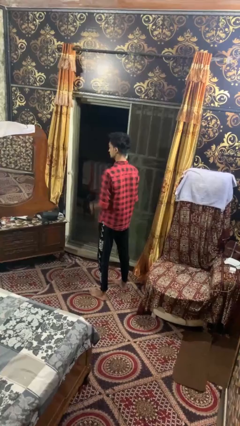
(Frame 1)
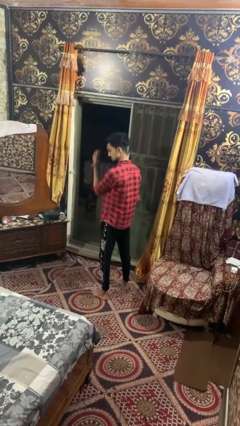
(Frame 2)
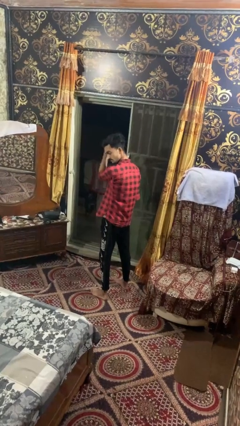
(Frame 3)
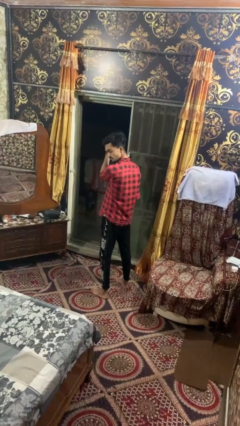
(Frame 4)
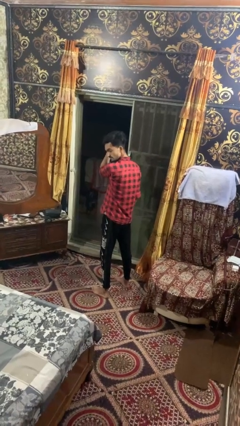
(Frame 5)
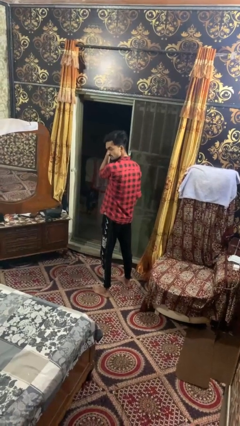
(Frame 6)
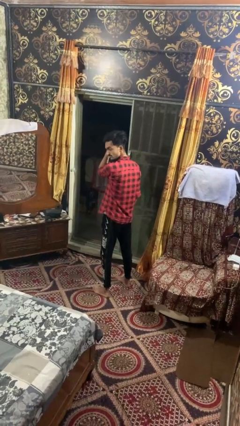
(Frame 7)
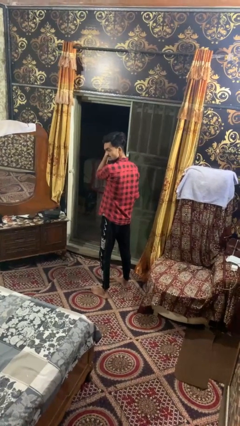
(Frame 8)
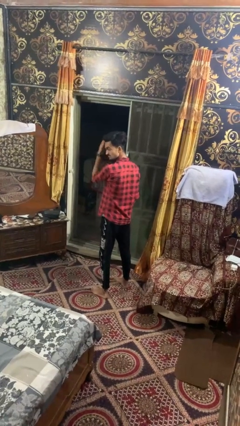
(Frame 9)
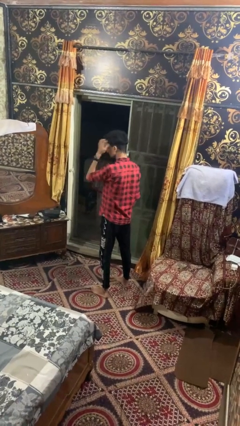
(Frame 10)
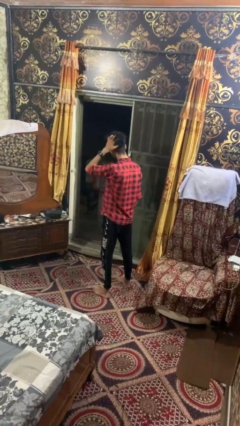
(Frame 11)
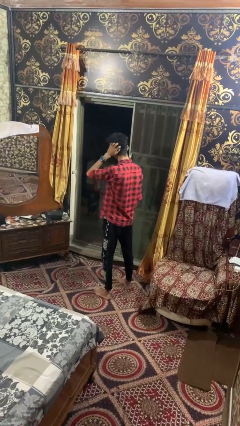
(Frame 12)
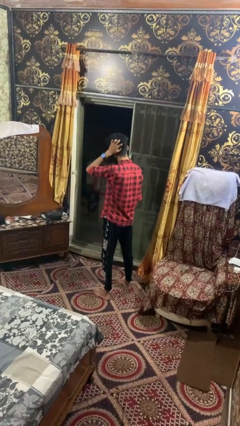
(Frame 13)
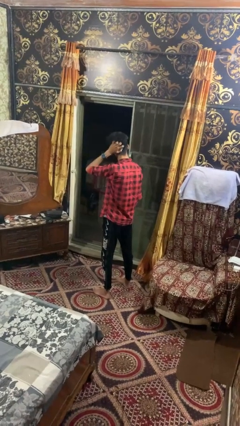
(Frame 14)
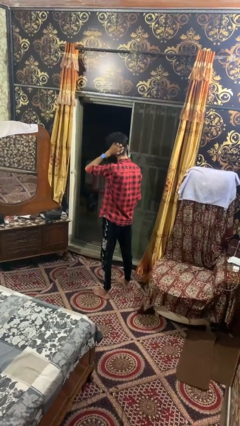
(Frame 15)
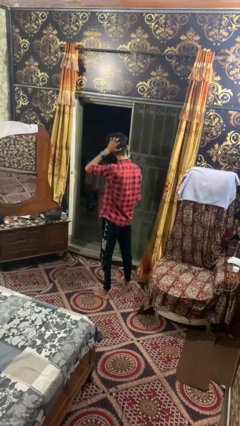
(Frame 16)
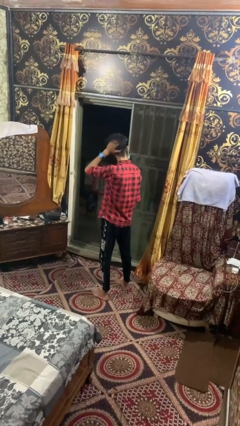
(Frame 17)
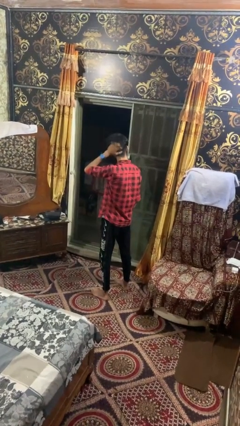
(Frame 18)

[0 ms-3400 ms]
person scratches face

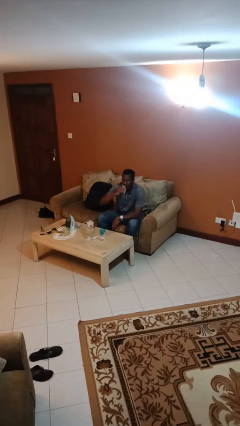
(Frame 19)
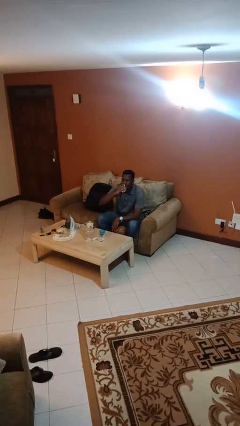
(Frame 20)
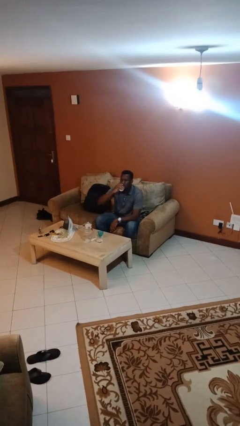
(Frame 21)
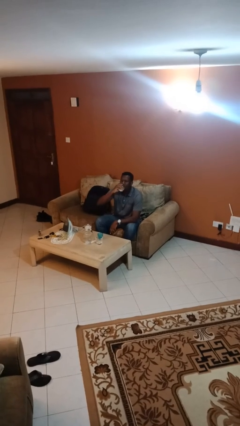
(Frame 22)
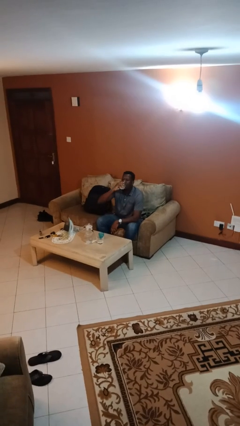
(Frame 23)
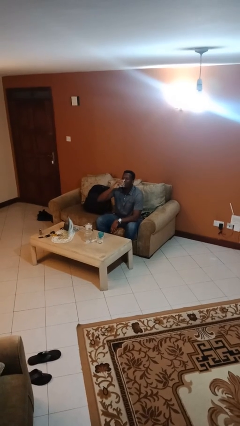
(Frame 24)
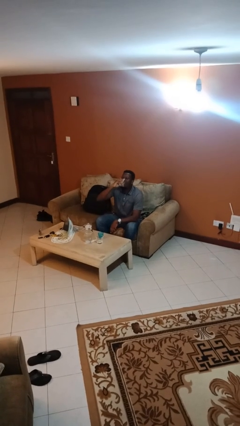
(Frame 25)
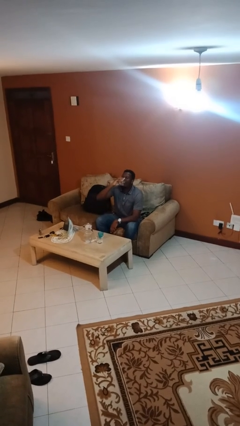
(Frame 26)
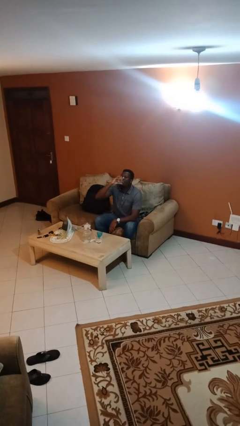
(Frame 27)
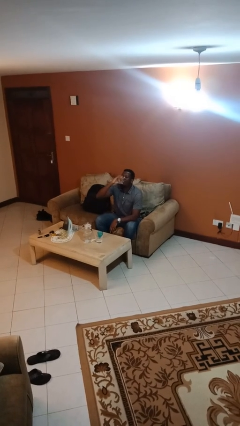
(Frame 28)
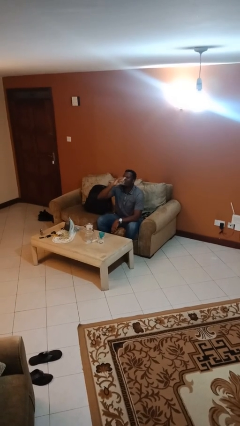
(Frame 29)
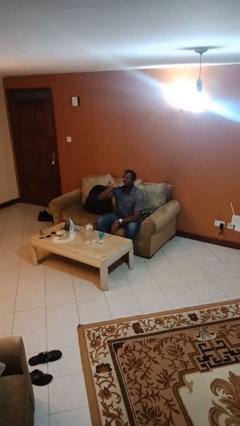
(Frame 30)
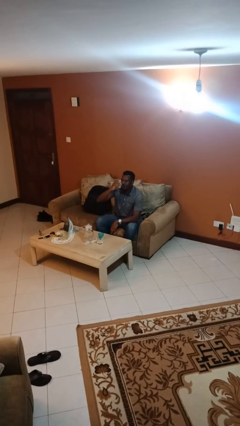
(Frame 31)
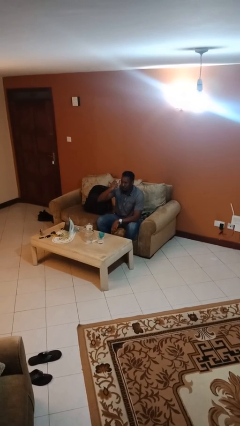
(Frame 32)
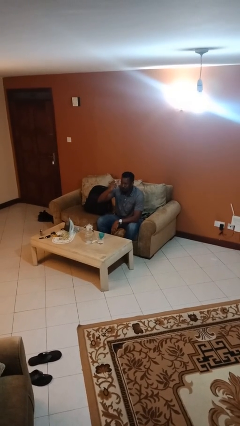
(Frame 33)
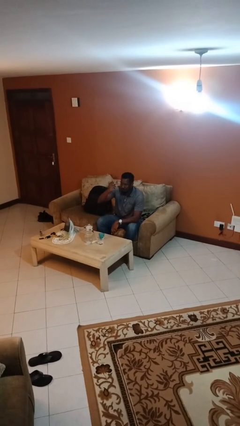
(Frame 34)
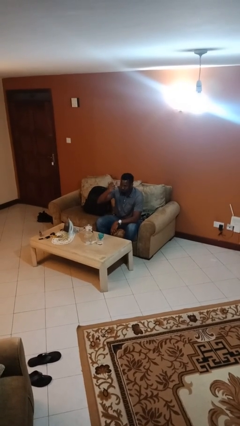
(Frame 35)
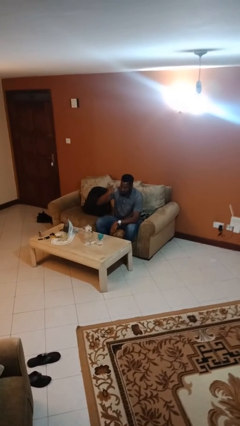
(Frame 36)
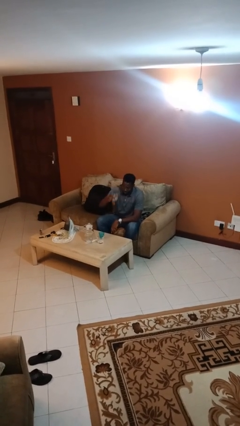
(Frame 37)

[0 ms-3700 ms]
person drinks from shotglass

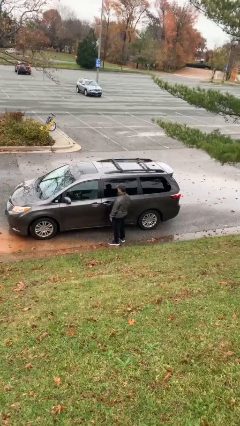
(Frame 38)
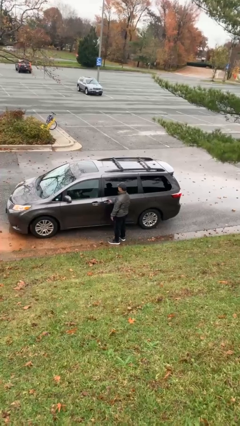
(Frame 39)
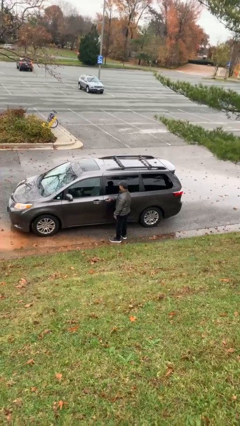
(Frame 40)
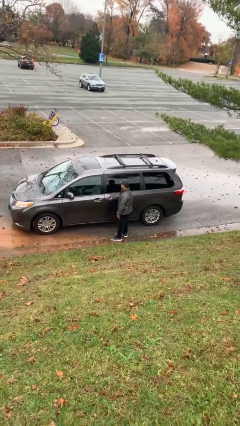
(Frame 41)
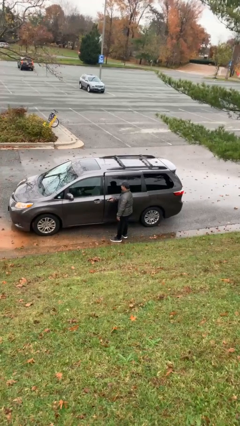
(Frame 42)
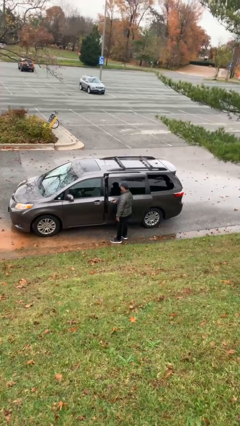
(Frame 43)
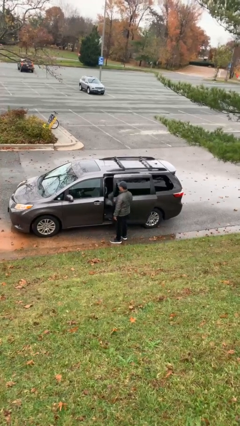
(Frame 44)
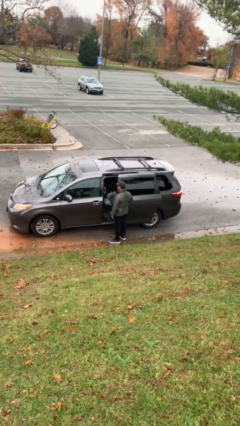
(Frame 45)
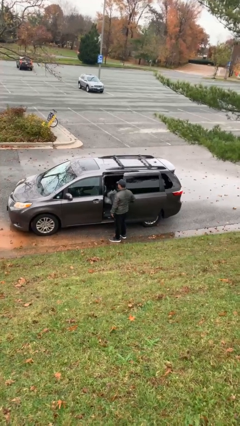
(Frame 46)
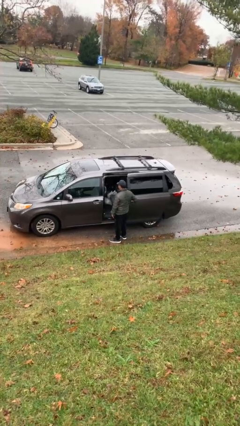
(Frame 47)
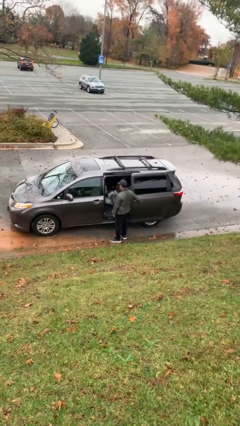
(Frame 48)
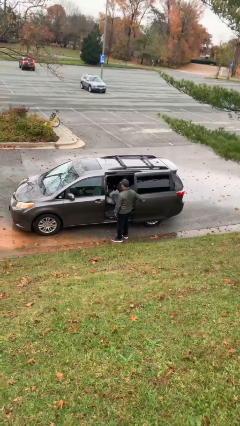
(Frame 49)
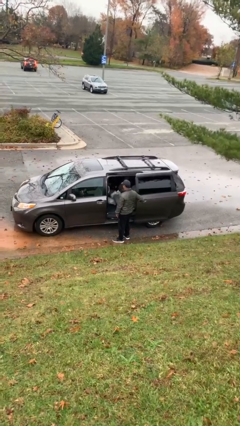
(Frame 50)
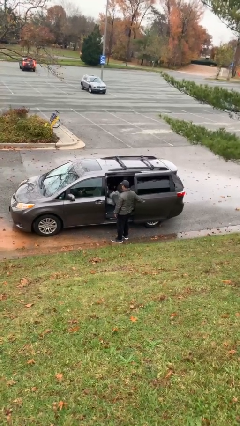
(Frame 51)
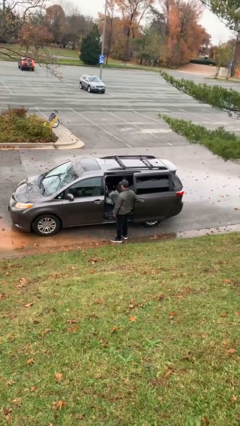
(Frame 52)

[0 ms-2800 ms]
person opens car door

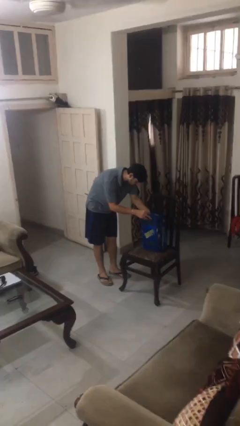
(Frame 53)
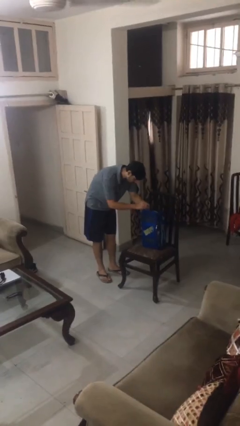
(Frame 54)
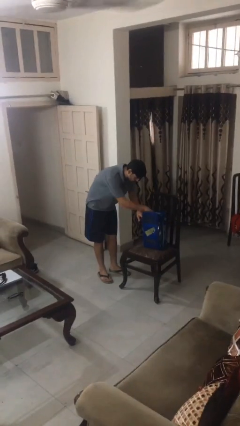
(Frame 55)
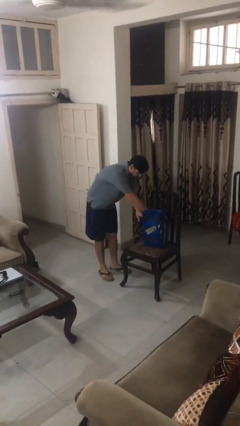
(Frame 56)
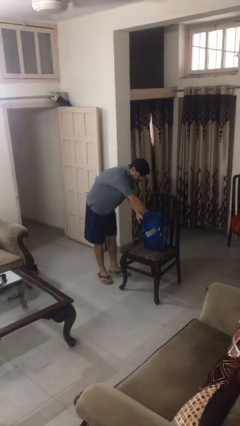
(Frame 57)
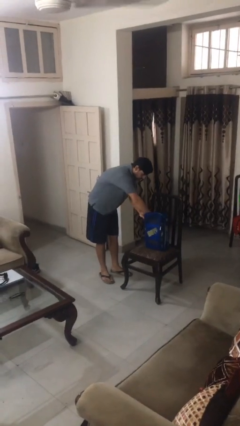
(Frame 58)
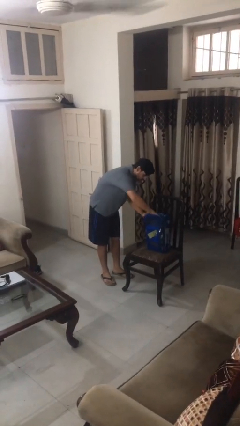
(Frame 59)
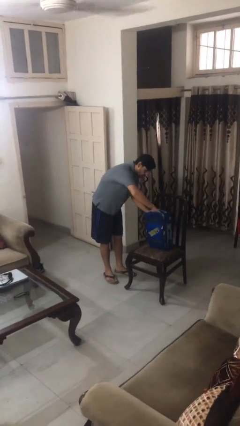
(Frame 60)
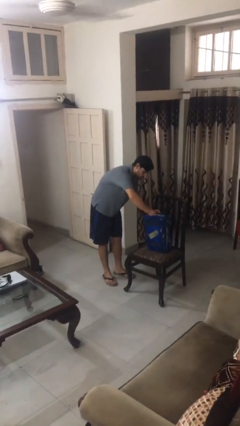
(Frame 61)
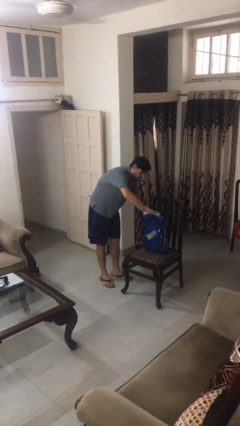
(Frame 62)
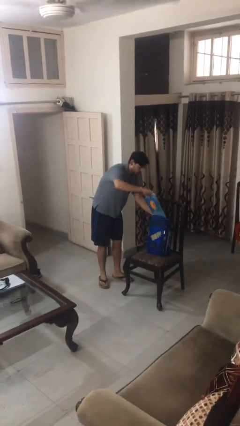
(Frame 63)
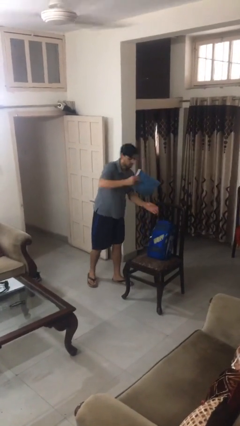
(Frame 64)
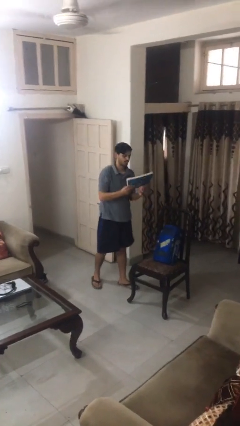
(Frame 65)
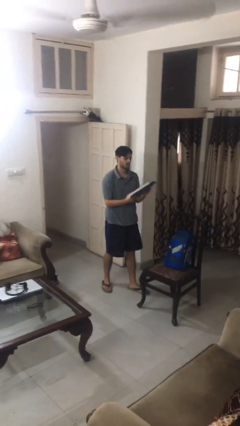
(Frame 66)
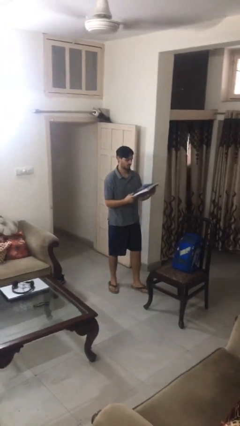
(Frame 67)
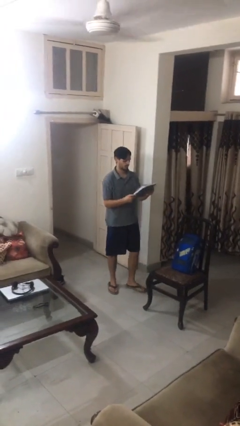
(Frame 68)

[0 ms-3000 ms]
person takes object from backpack

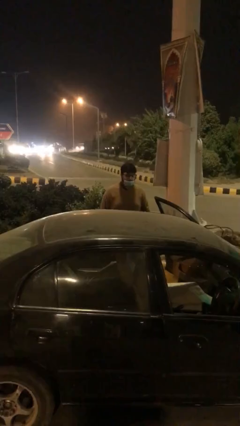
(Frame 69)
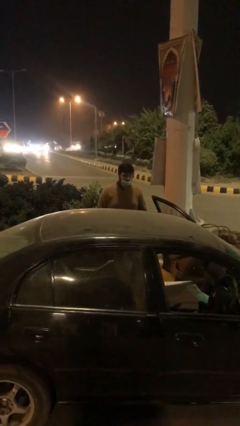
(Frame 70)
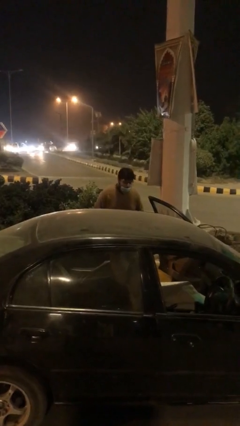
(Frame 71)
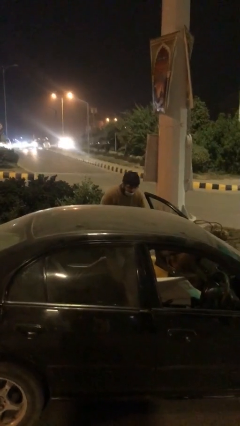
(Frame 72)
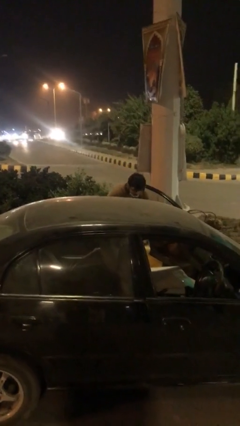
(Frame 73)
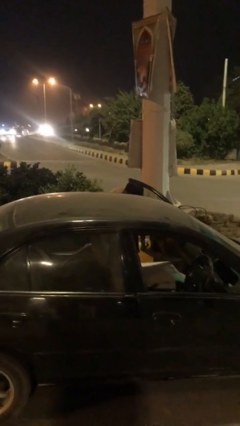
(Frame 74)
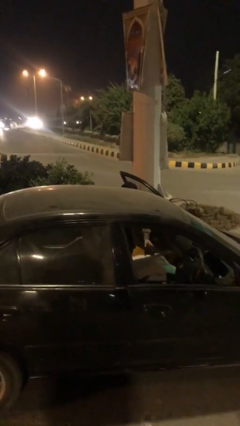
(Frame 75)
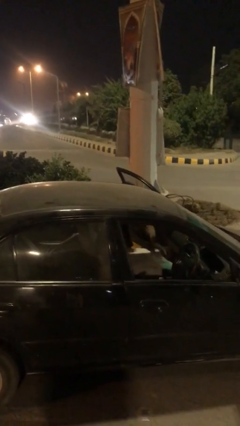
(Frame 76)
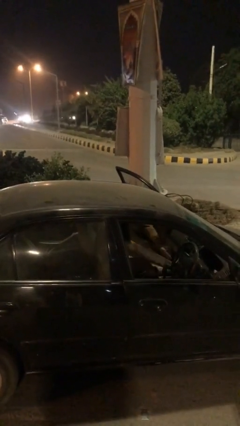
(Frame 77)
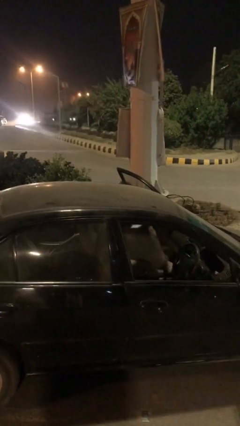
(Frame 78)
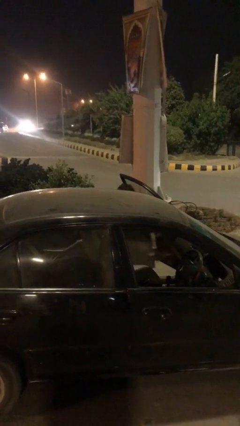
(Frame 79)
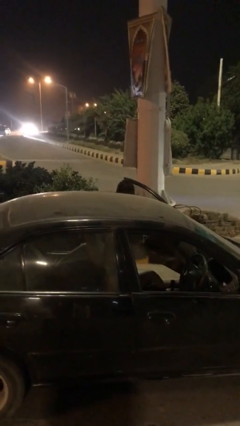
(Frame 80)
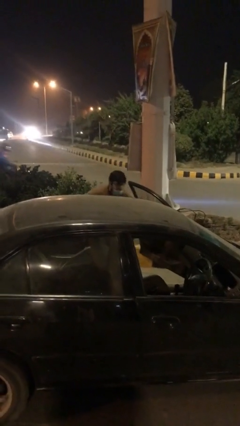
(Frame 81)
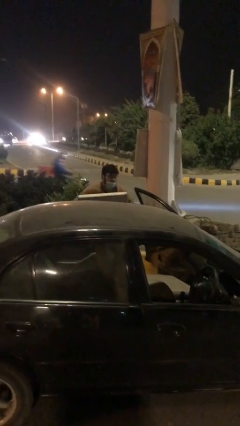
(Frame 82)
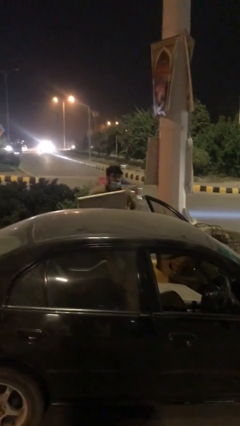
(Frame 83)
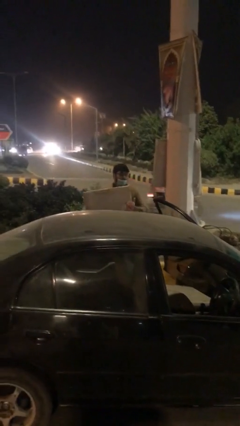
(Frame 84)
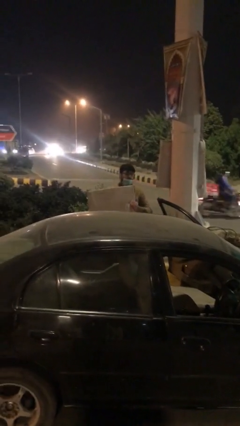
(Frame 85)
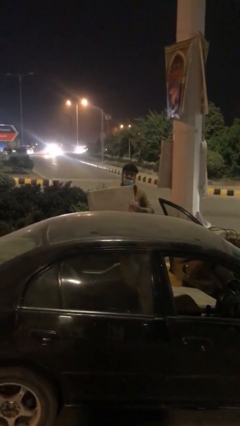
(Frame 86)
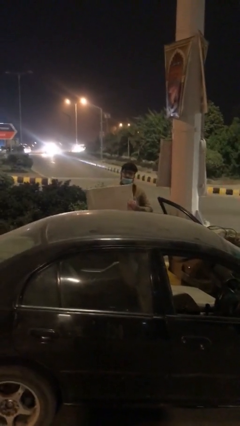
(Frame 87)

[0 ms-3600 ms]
person unloads car

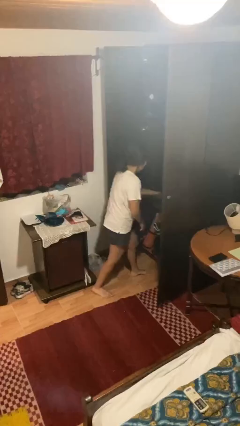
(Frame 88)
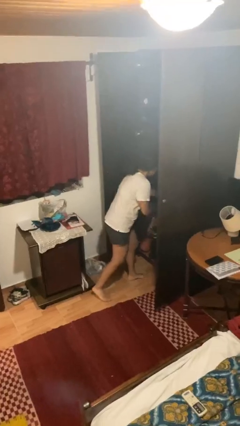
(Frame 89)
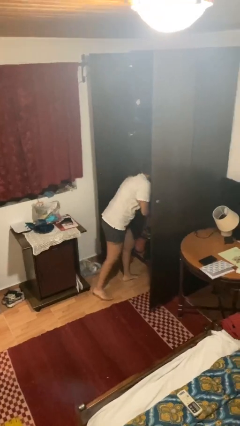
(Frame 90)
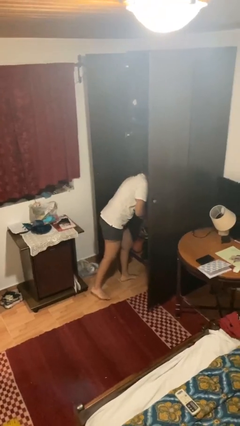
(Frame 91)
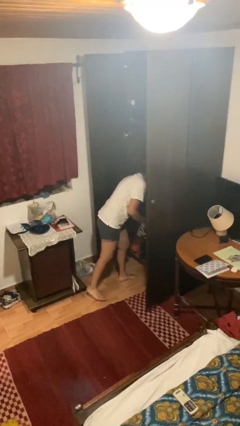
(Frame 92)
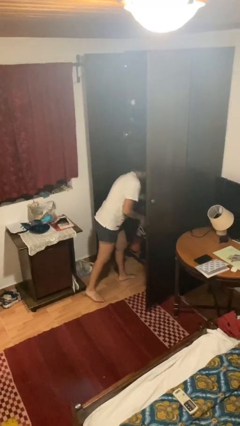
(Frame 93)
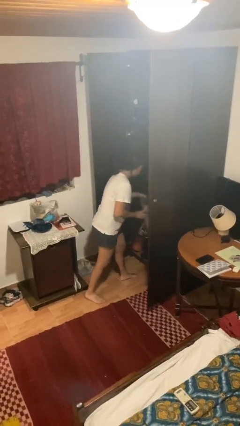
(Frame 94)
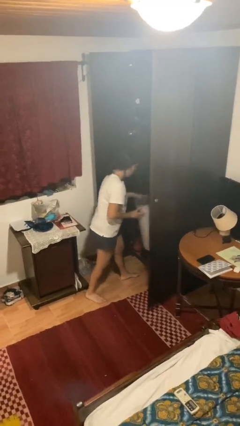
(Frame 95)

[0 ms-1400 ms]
person picks up object from cabinet
